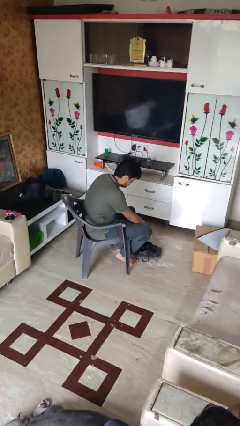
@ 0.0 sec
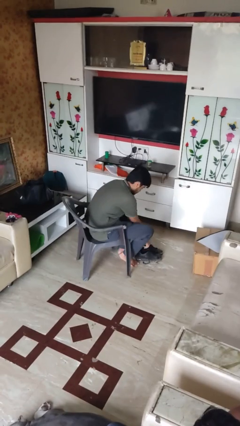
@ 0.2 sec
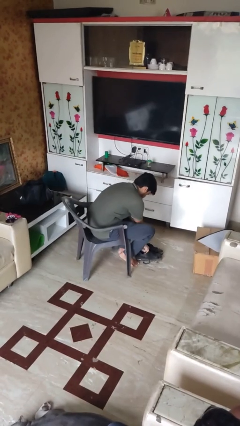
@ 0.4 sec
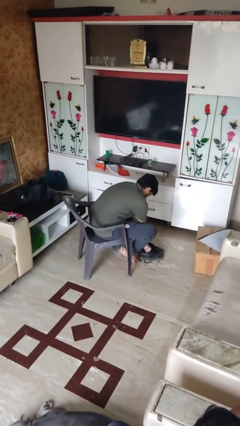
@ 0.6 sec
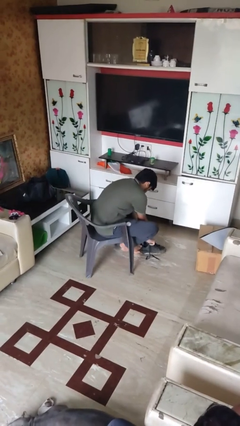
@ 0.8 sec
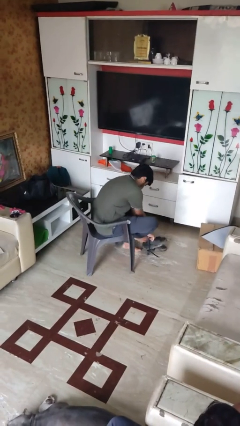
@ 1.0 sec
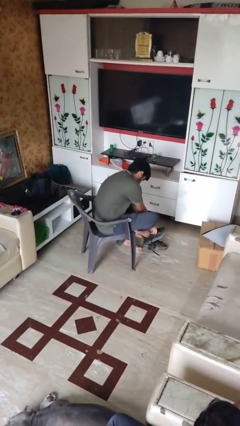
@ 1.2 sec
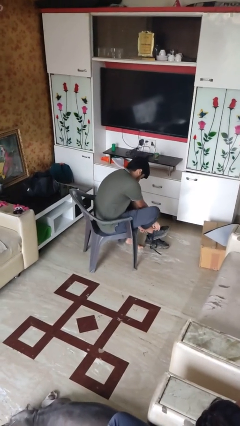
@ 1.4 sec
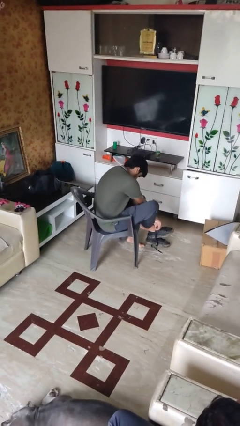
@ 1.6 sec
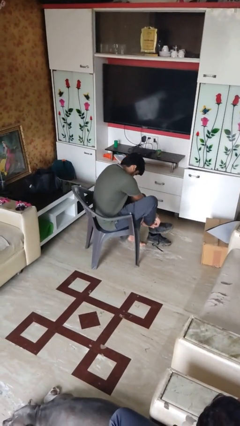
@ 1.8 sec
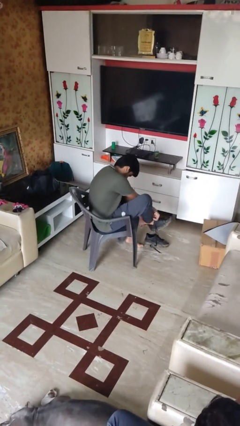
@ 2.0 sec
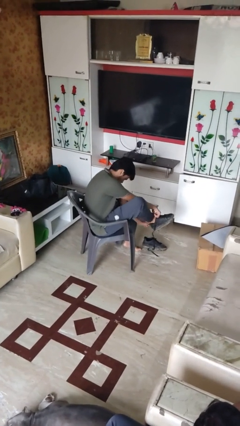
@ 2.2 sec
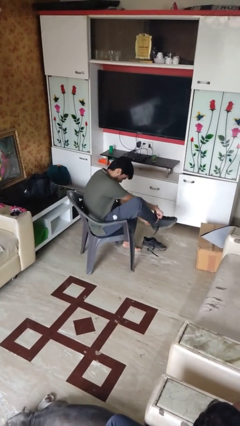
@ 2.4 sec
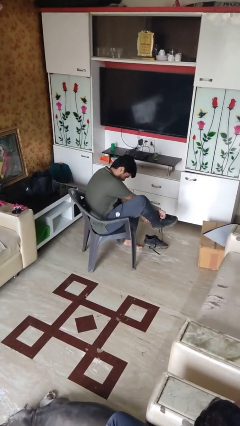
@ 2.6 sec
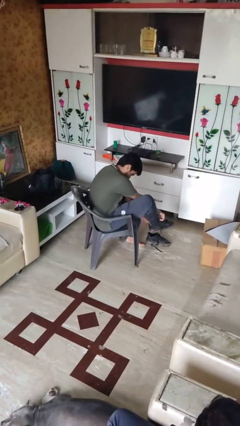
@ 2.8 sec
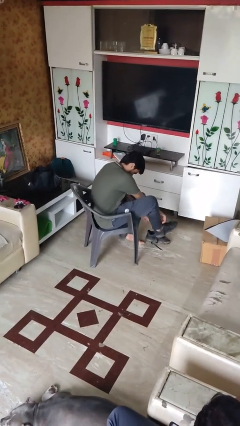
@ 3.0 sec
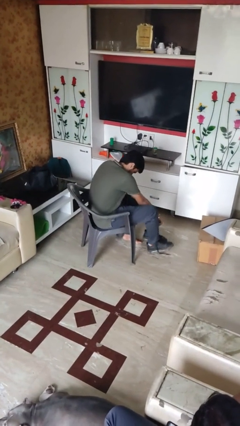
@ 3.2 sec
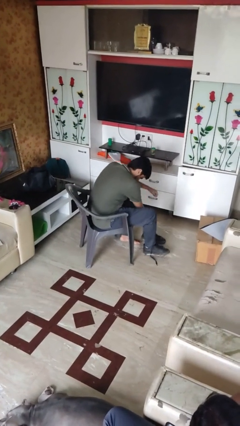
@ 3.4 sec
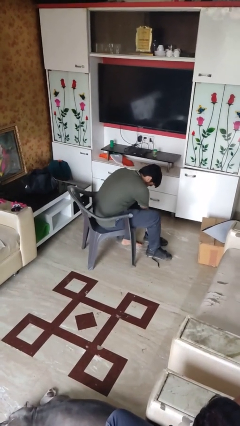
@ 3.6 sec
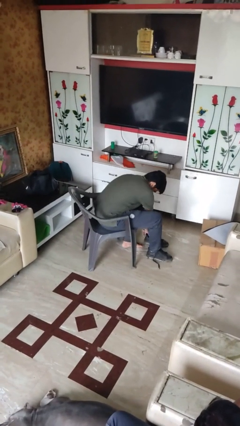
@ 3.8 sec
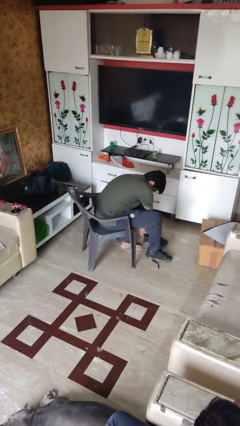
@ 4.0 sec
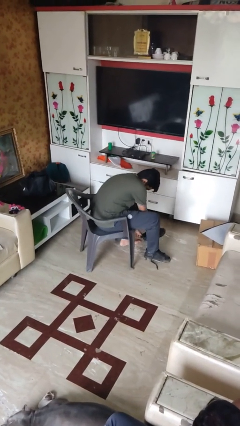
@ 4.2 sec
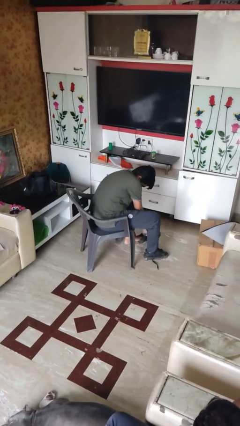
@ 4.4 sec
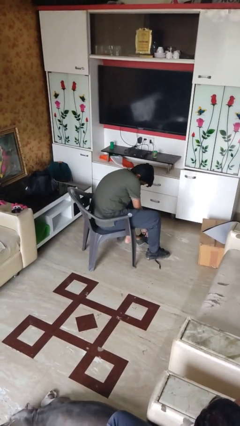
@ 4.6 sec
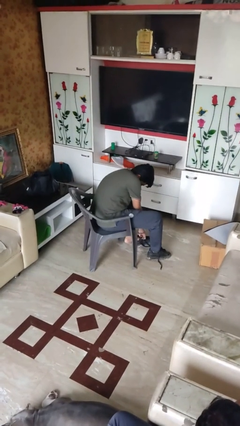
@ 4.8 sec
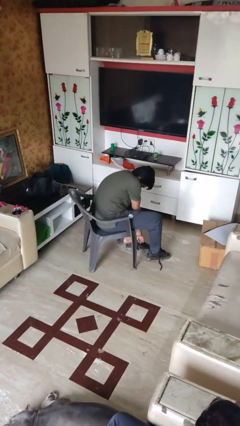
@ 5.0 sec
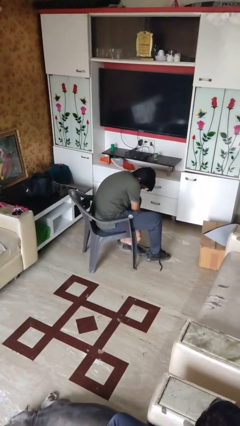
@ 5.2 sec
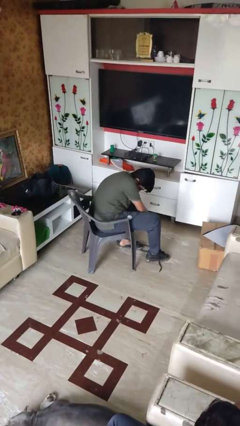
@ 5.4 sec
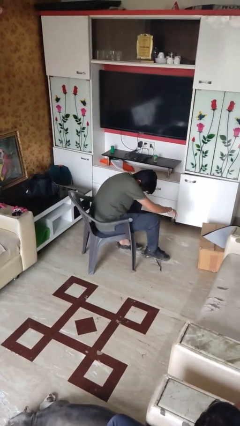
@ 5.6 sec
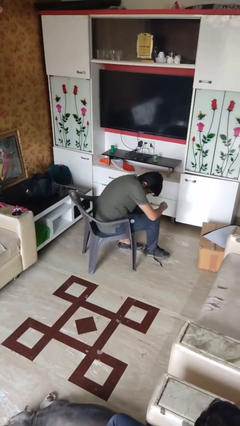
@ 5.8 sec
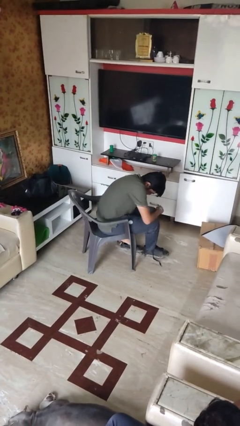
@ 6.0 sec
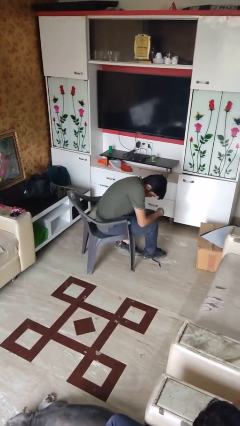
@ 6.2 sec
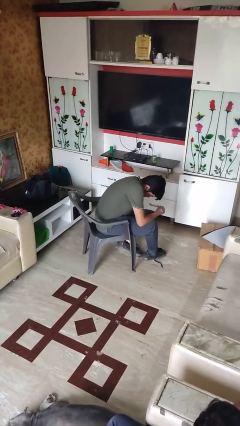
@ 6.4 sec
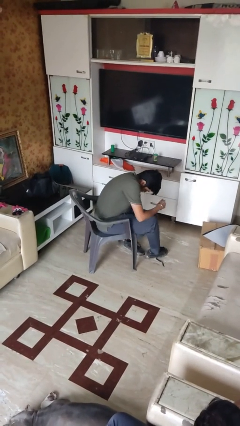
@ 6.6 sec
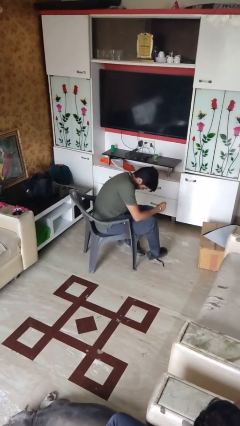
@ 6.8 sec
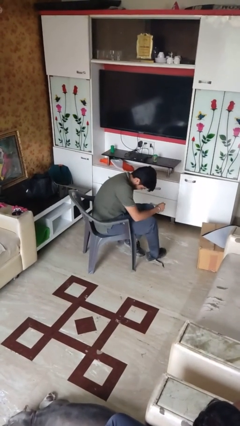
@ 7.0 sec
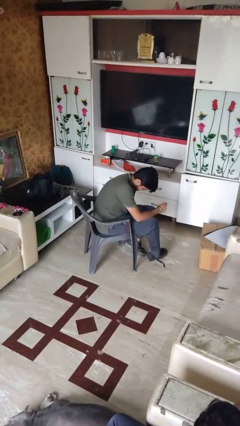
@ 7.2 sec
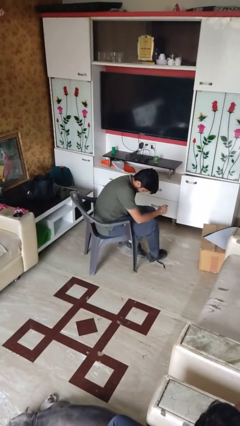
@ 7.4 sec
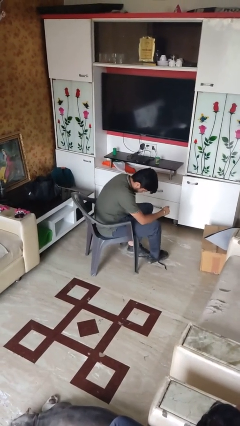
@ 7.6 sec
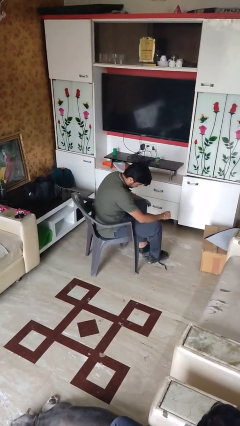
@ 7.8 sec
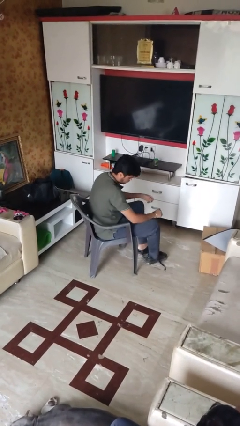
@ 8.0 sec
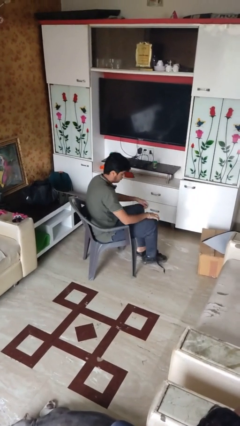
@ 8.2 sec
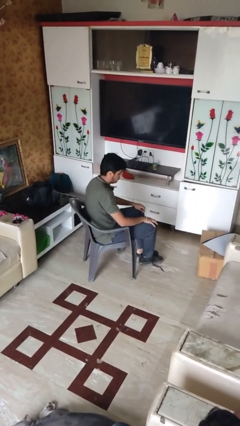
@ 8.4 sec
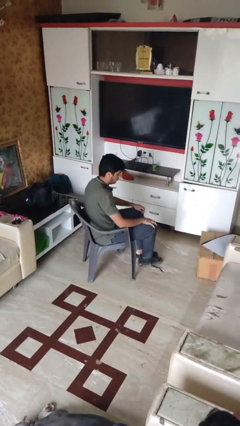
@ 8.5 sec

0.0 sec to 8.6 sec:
person puts on shoes

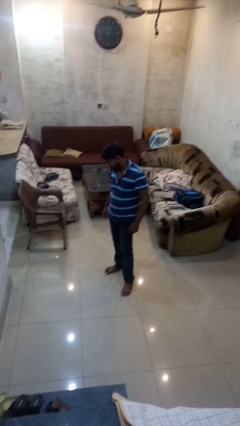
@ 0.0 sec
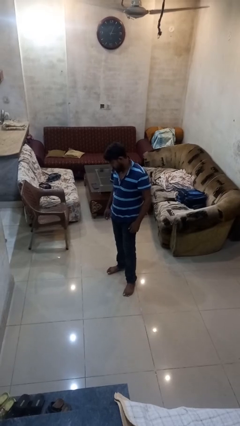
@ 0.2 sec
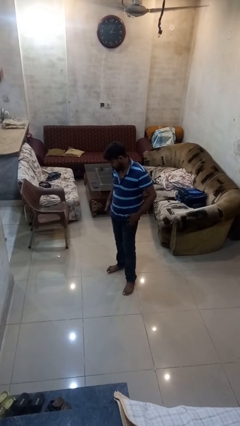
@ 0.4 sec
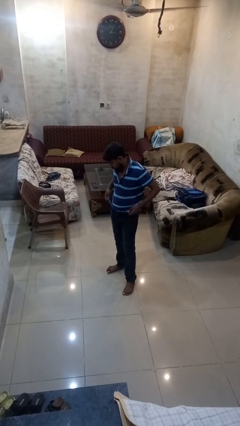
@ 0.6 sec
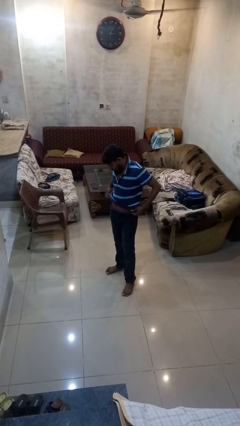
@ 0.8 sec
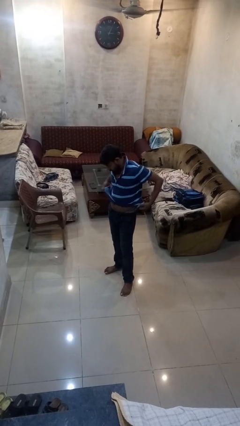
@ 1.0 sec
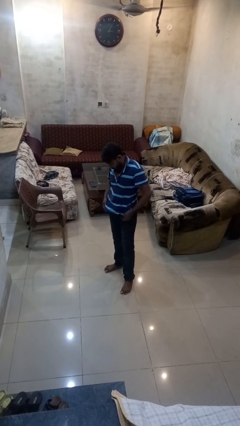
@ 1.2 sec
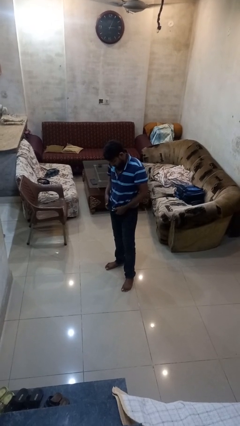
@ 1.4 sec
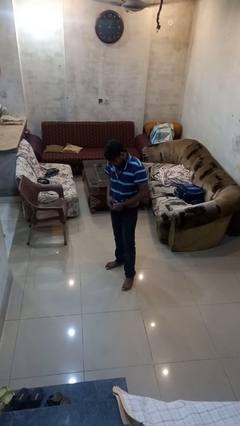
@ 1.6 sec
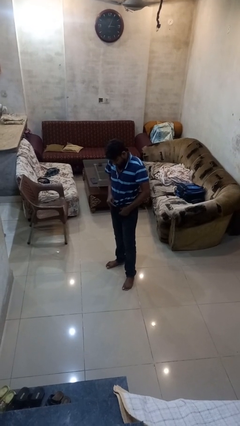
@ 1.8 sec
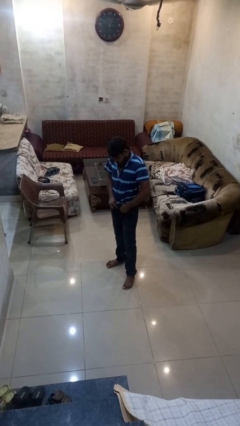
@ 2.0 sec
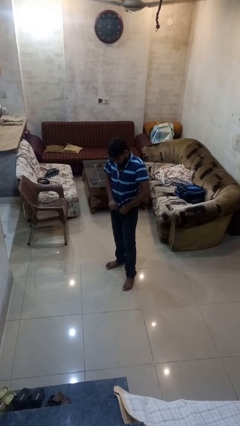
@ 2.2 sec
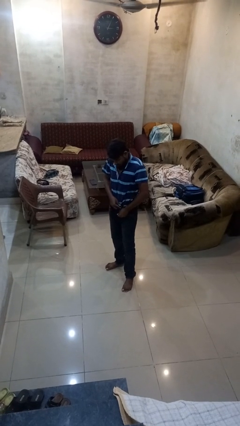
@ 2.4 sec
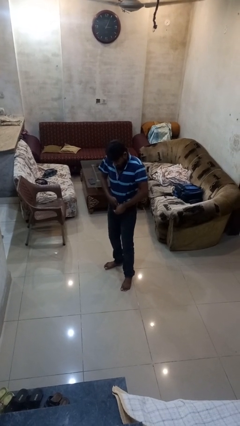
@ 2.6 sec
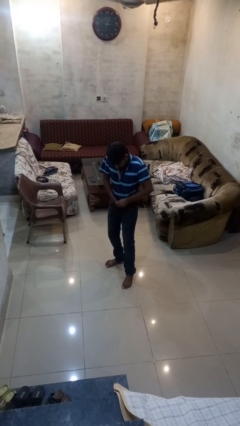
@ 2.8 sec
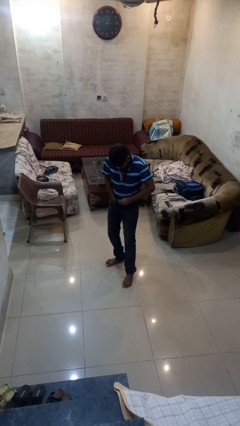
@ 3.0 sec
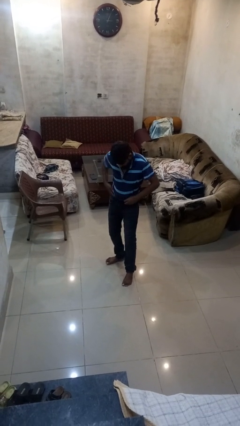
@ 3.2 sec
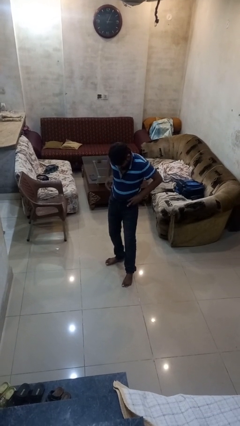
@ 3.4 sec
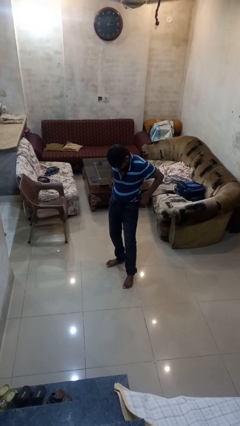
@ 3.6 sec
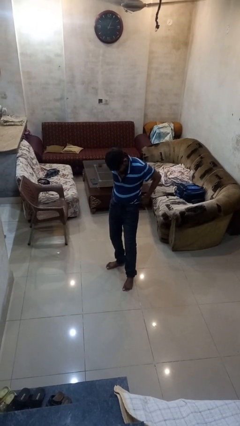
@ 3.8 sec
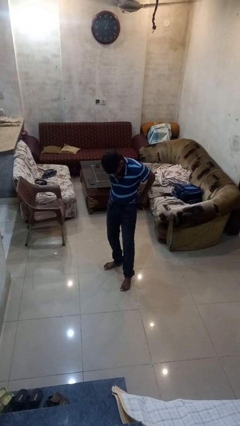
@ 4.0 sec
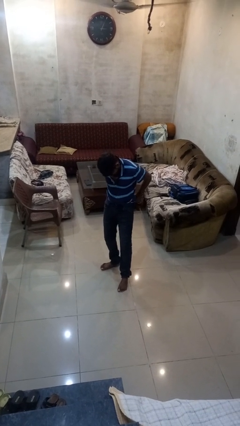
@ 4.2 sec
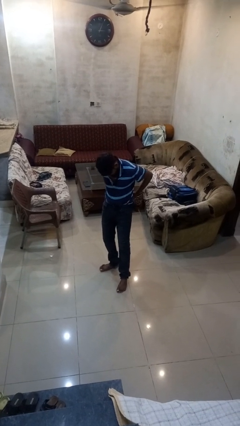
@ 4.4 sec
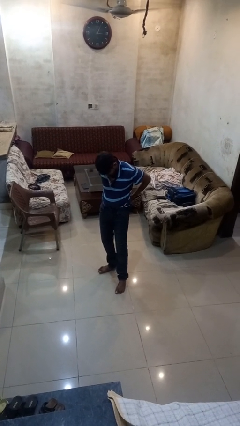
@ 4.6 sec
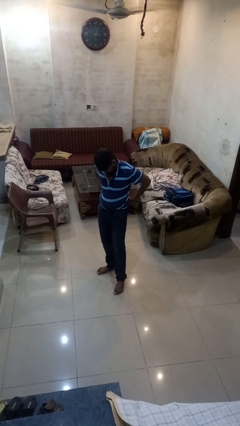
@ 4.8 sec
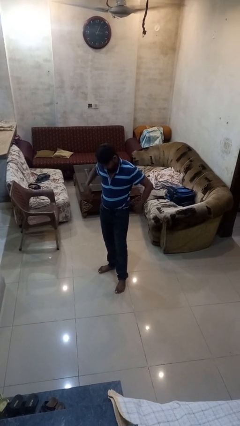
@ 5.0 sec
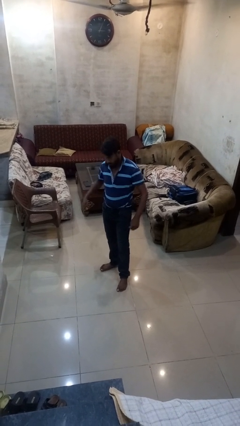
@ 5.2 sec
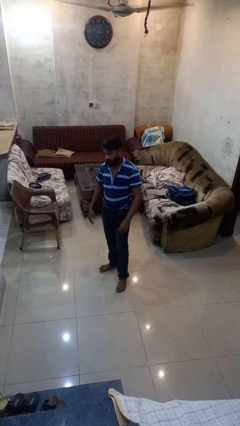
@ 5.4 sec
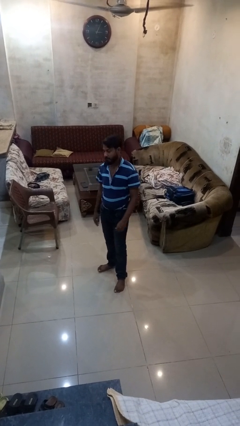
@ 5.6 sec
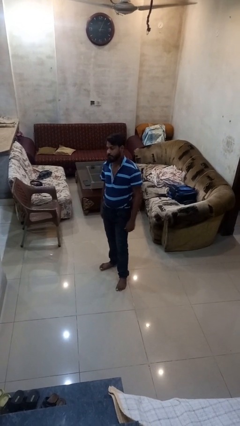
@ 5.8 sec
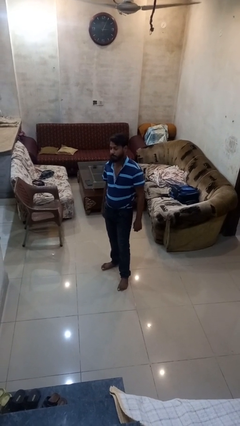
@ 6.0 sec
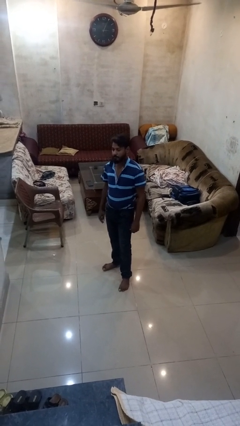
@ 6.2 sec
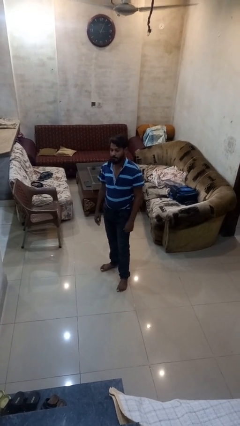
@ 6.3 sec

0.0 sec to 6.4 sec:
person tucks in shirt

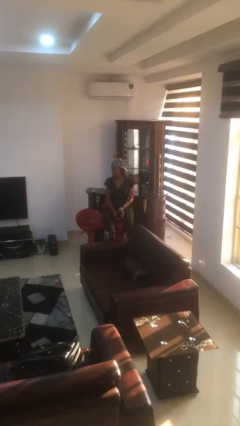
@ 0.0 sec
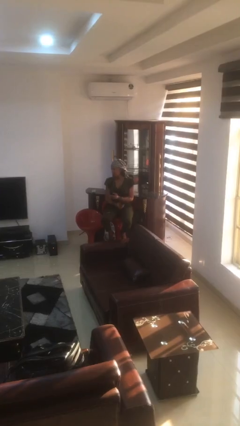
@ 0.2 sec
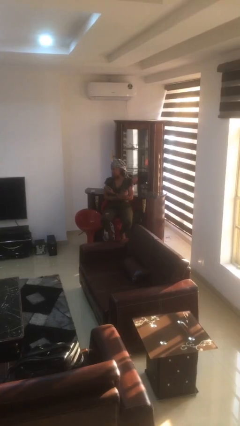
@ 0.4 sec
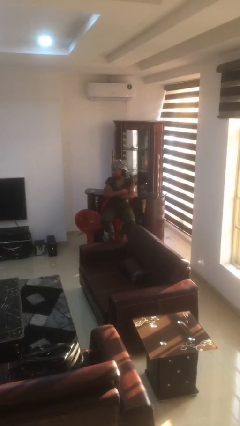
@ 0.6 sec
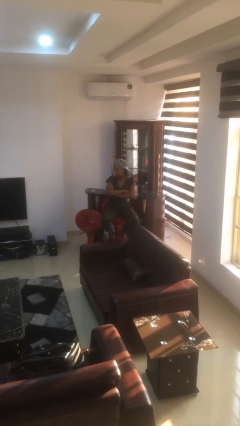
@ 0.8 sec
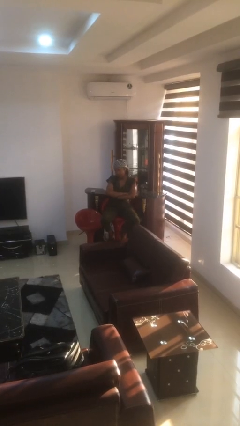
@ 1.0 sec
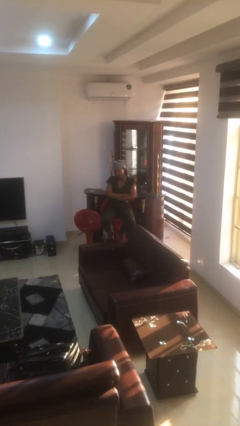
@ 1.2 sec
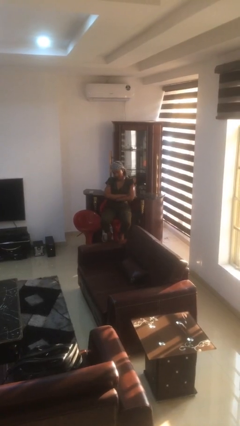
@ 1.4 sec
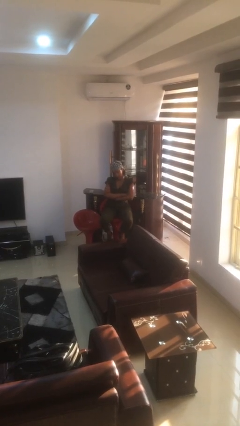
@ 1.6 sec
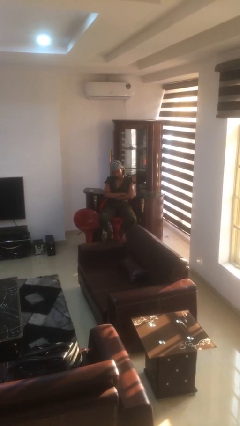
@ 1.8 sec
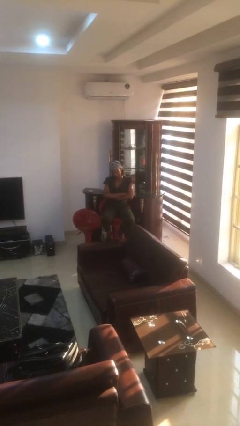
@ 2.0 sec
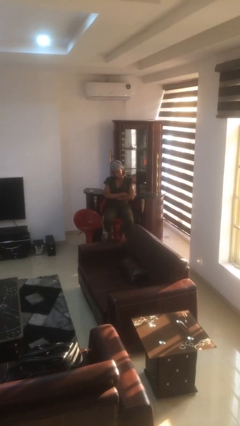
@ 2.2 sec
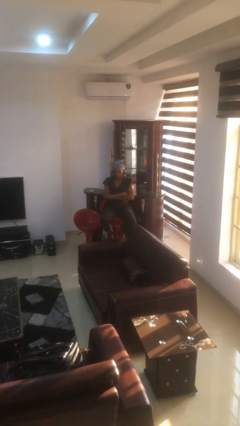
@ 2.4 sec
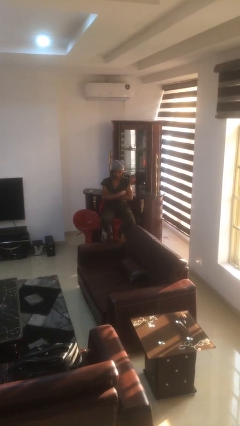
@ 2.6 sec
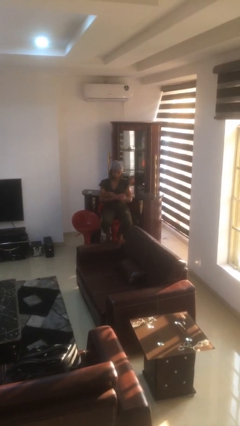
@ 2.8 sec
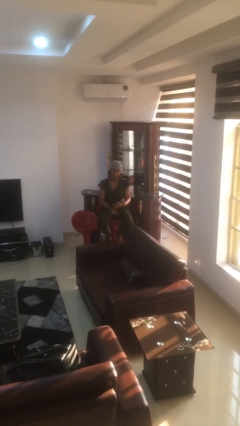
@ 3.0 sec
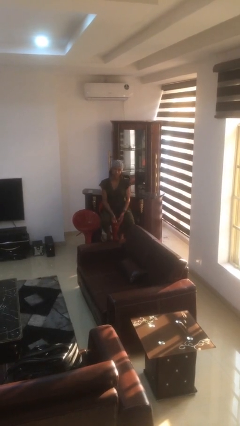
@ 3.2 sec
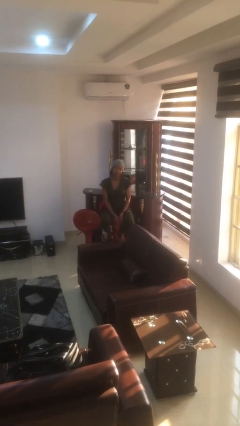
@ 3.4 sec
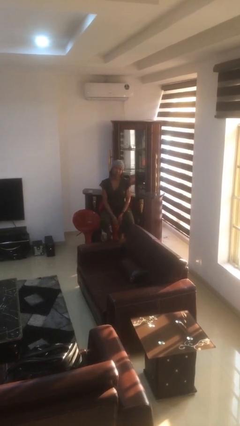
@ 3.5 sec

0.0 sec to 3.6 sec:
person crosses arms
